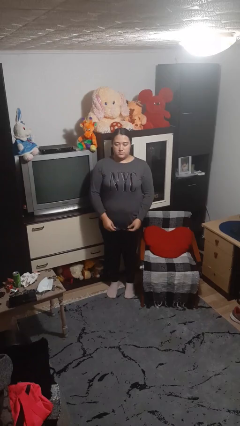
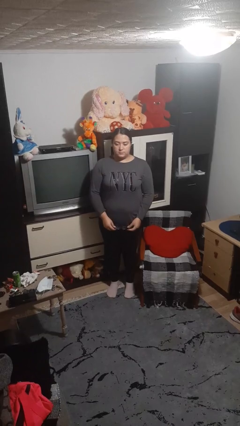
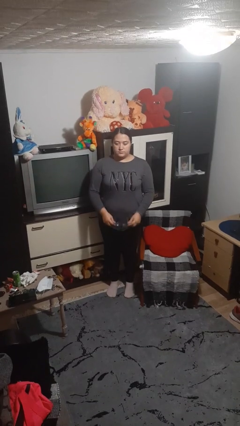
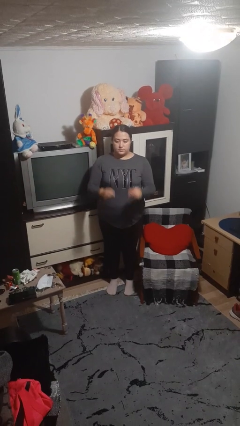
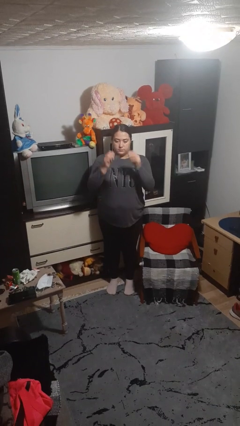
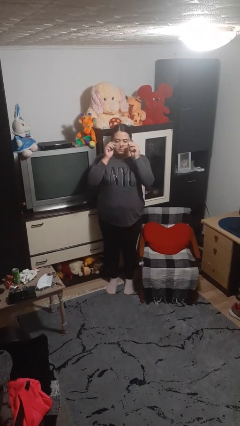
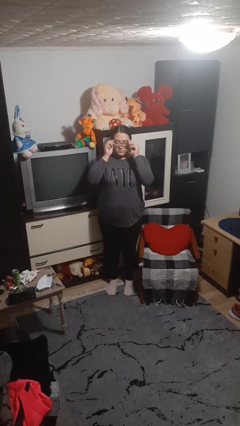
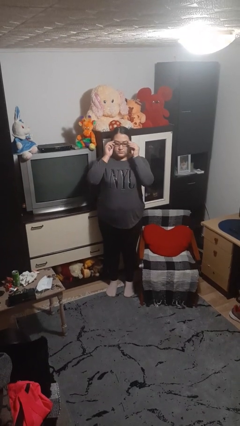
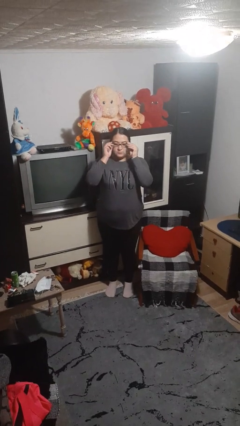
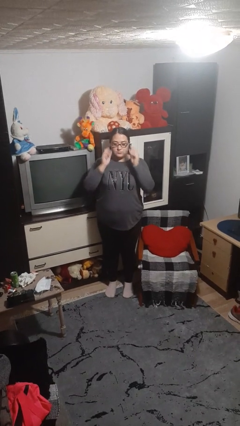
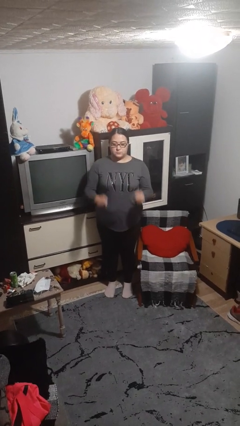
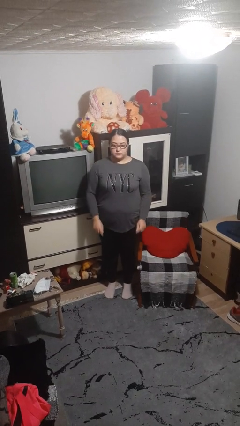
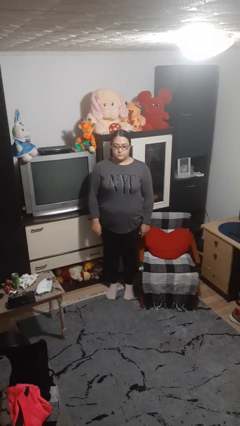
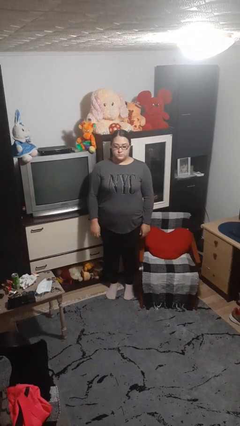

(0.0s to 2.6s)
person puts on glasses

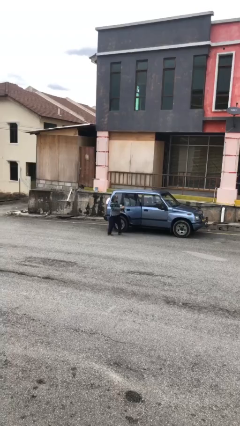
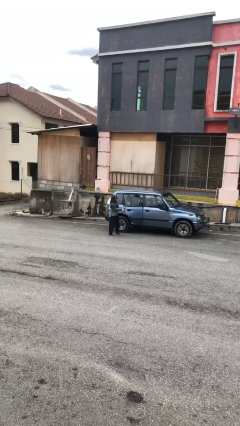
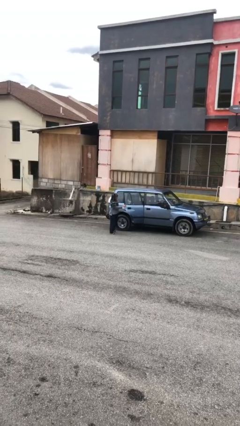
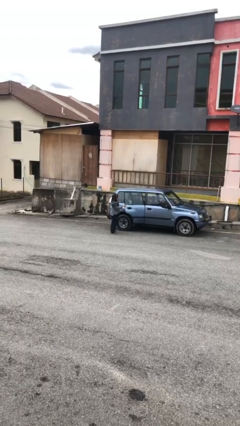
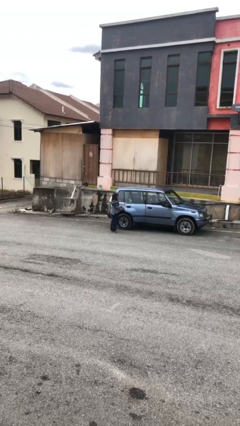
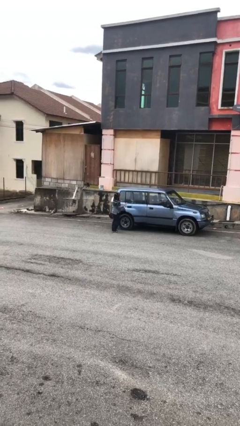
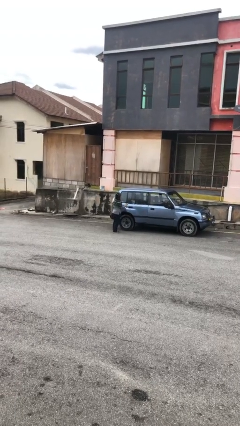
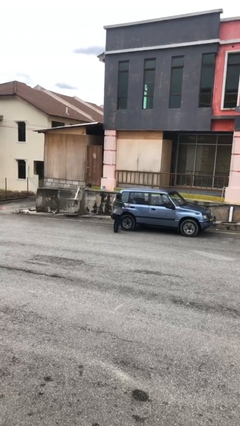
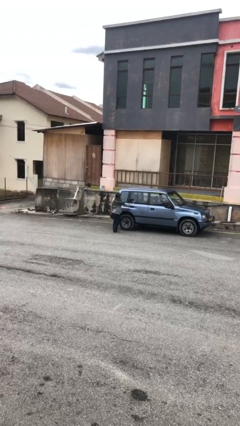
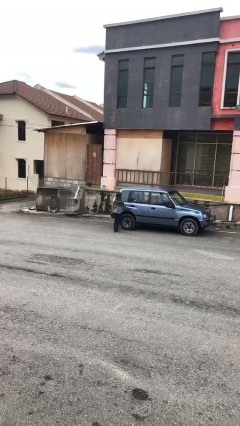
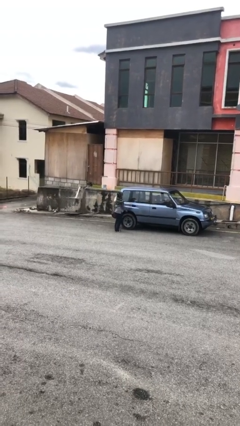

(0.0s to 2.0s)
person closes car door

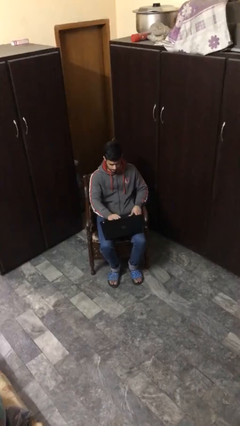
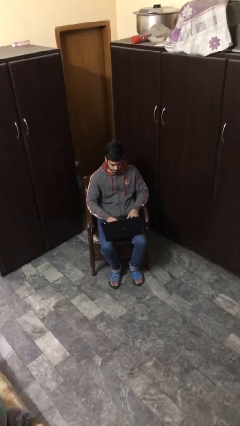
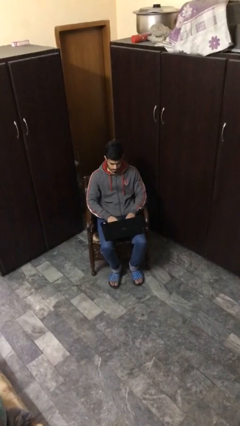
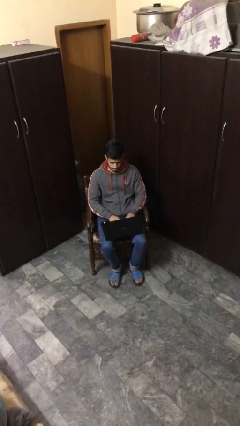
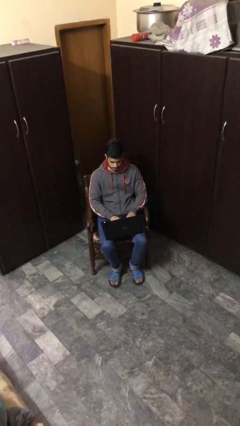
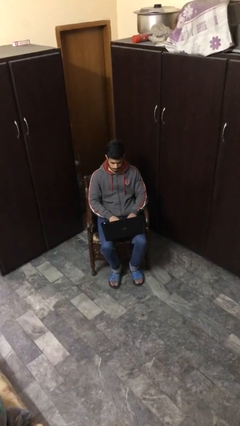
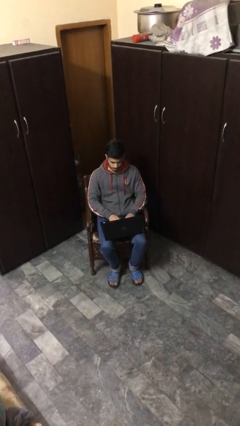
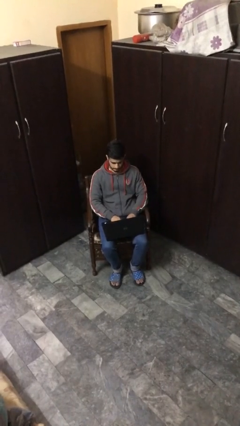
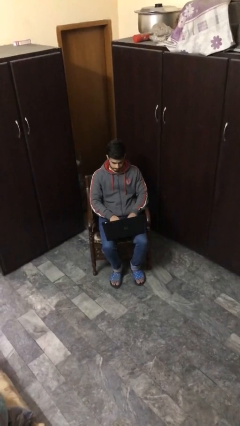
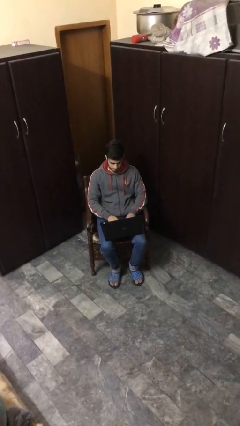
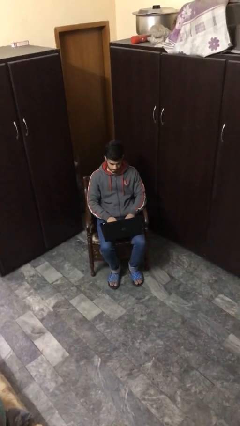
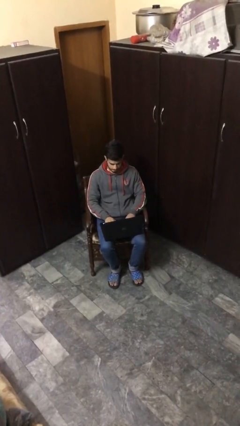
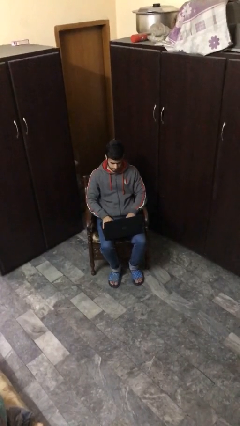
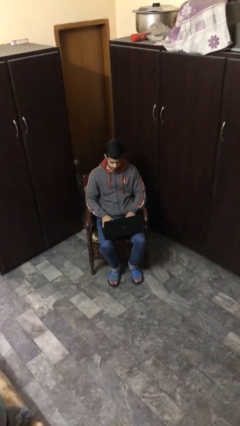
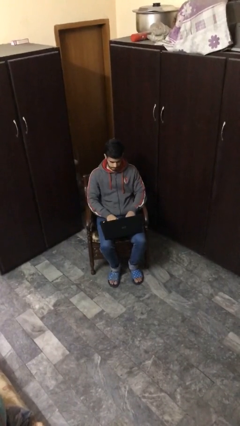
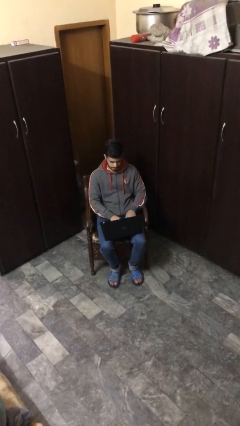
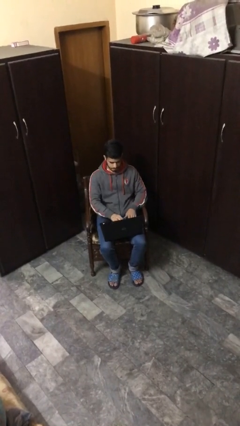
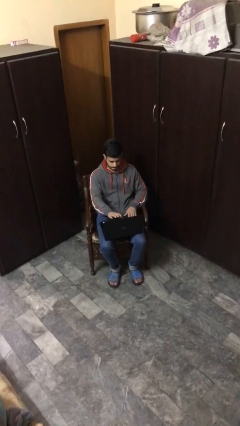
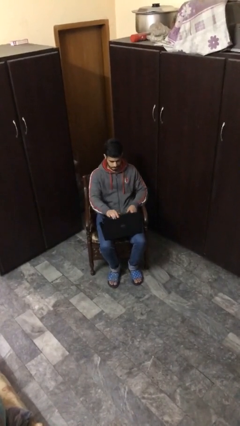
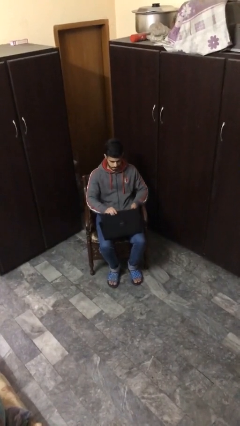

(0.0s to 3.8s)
person interacts with laptop

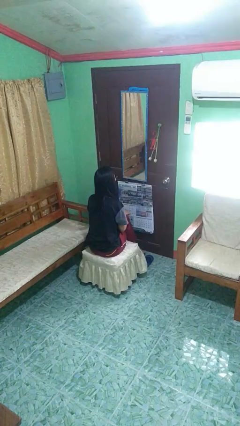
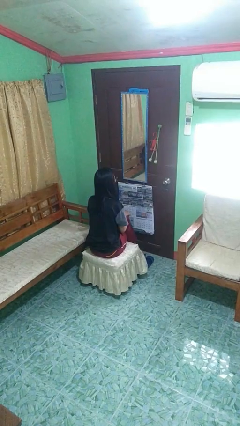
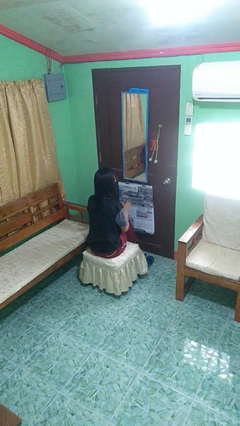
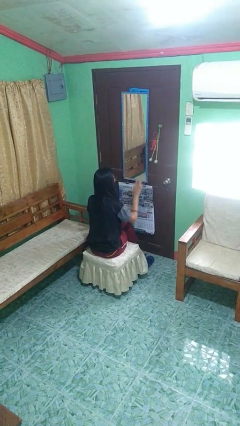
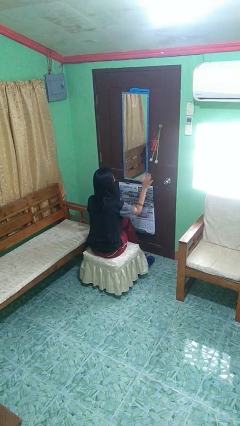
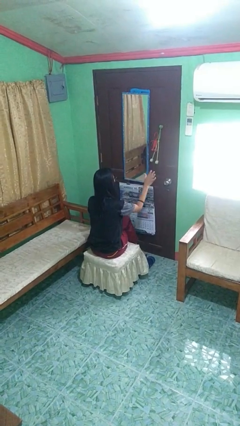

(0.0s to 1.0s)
person gestures swipe right

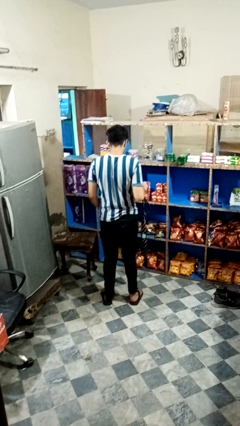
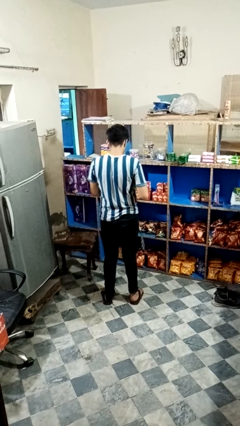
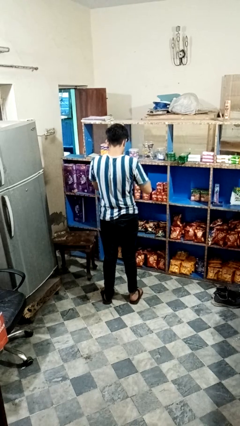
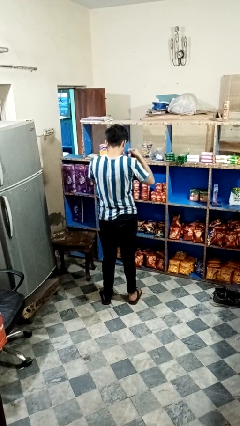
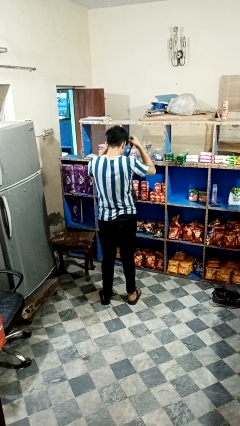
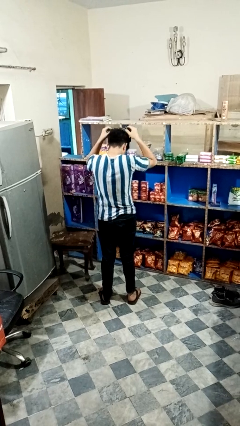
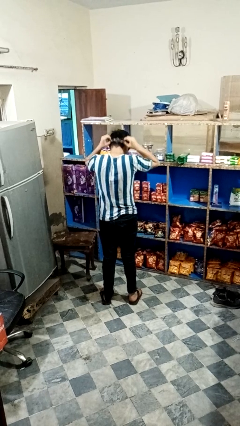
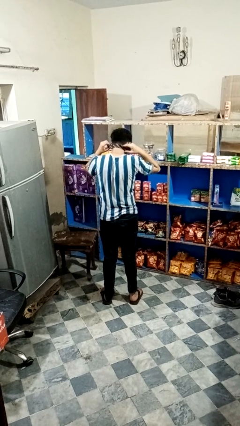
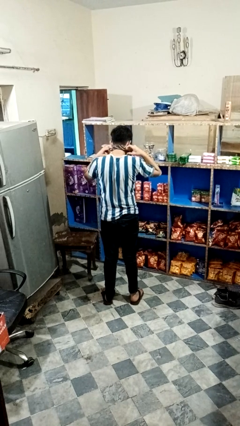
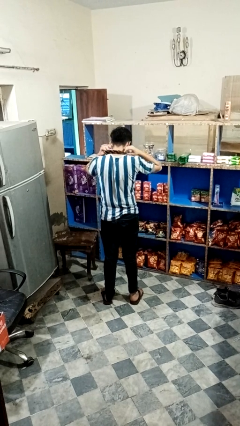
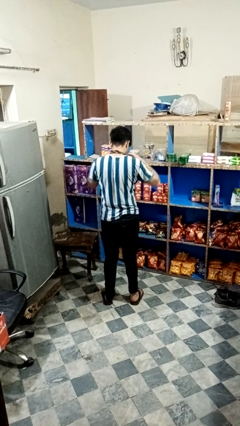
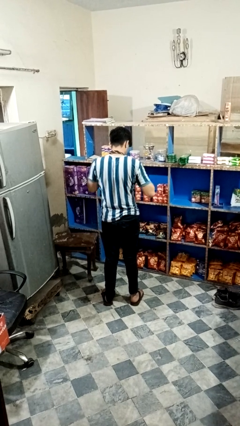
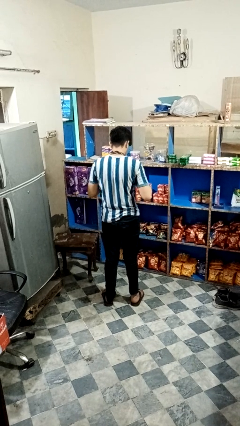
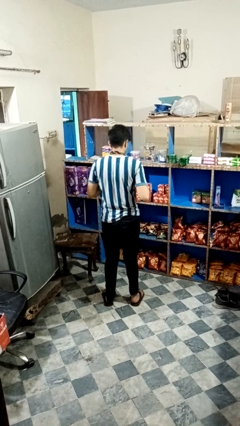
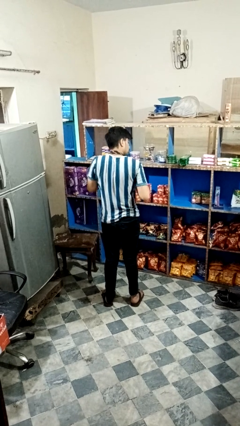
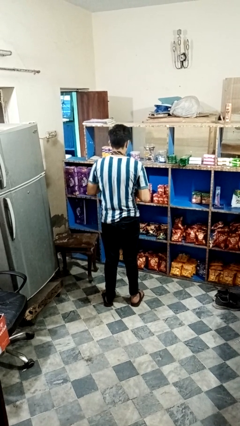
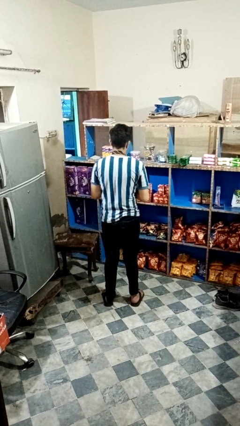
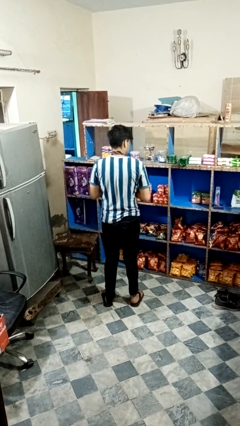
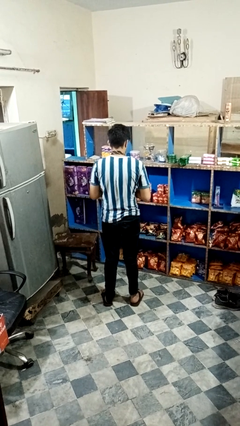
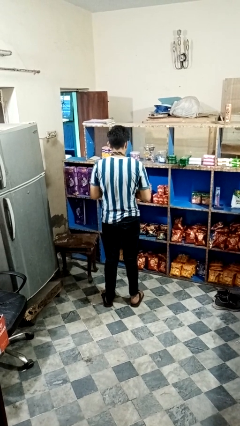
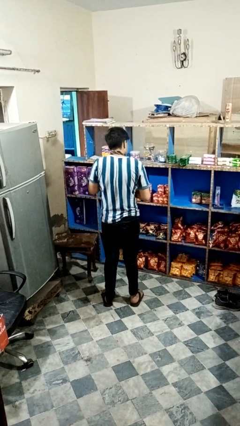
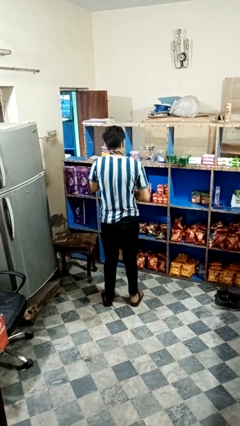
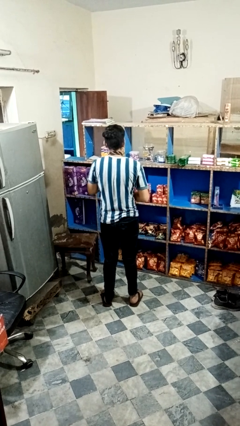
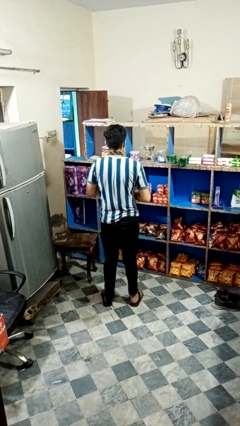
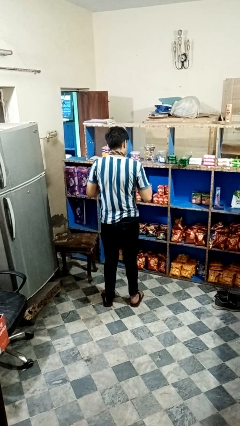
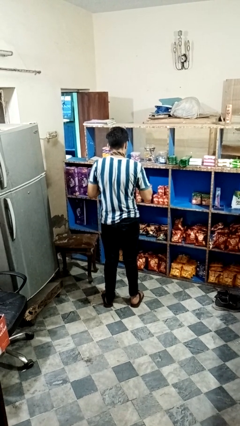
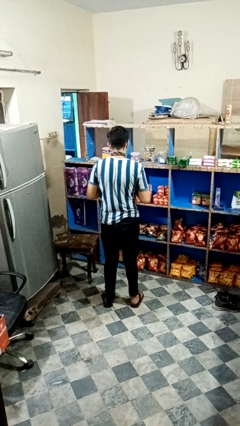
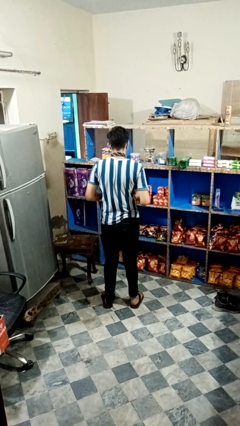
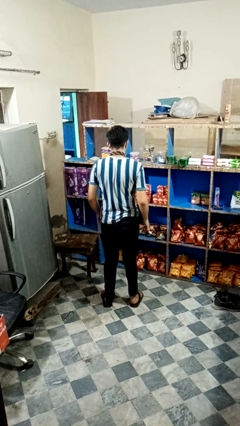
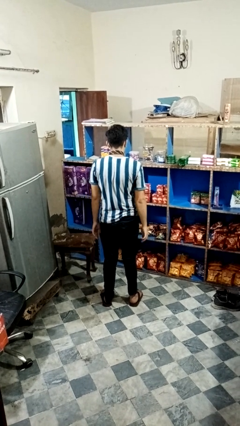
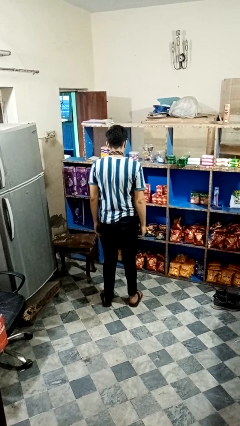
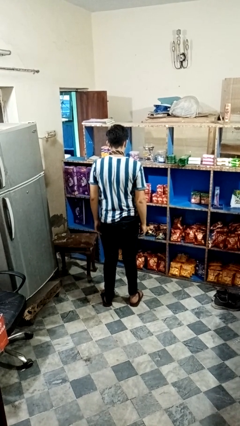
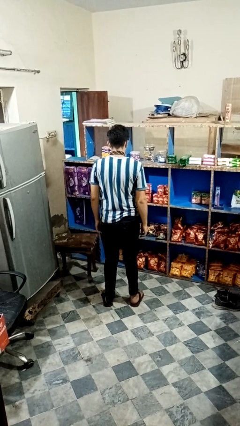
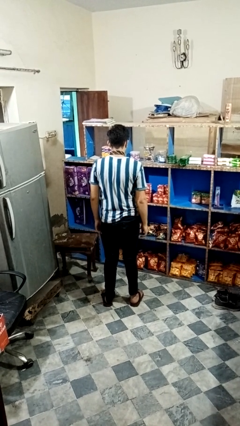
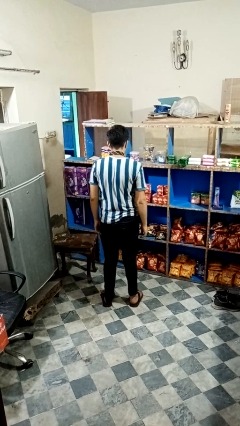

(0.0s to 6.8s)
person puts on necktie

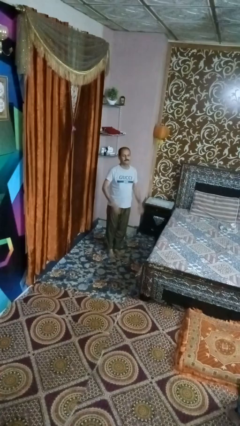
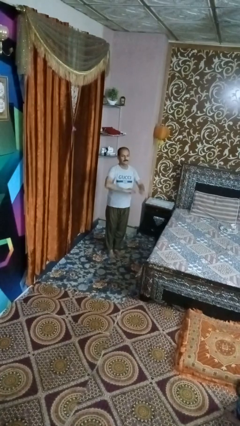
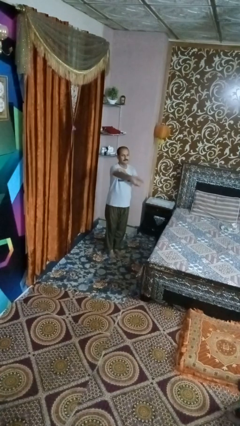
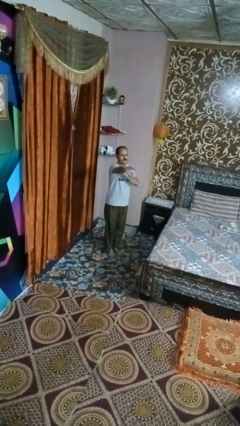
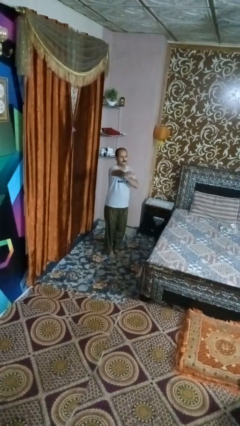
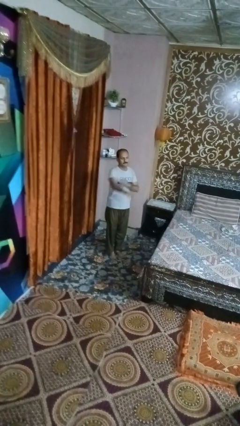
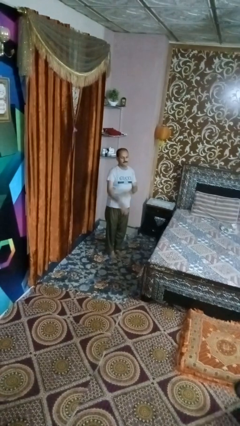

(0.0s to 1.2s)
person karate chop

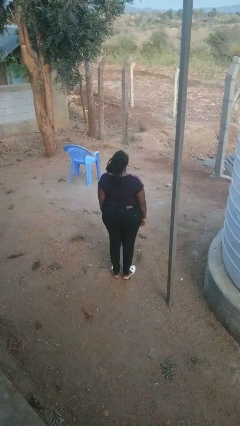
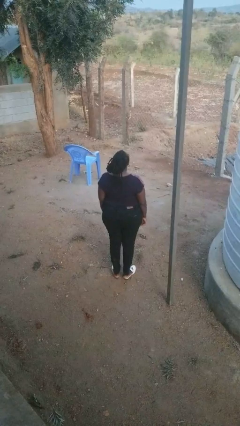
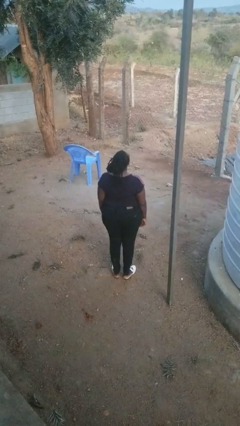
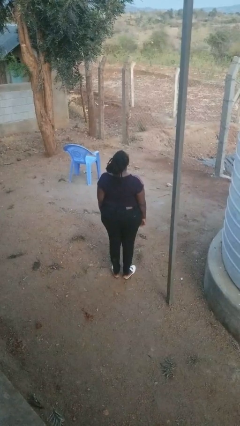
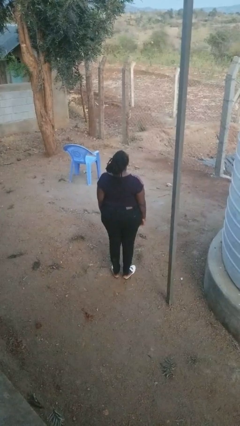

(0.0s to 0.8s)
person dances in place
